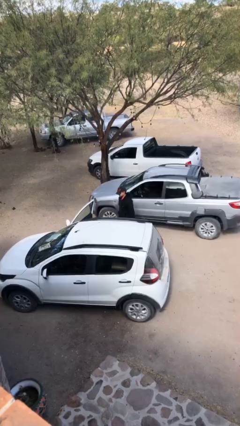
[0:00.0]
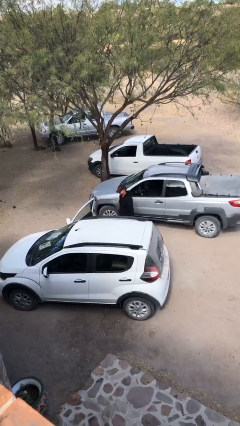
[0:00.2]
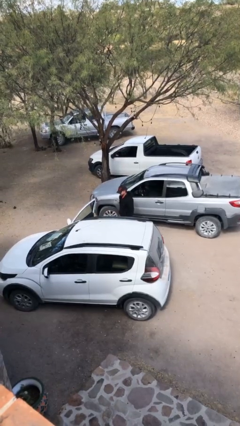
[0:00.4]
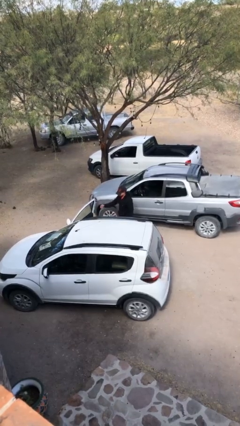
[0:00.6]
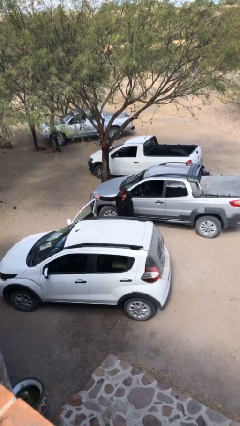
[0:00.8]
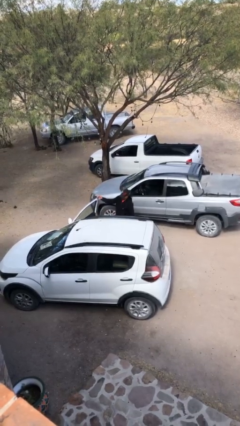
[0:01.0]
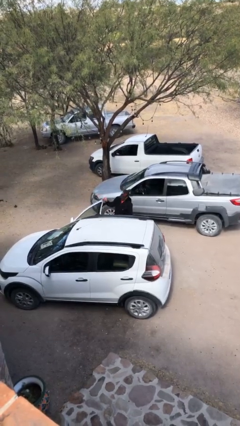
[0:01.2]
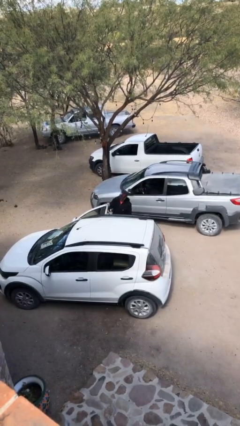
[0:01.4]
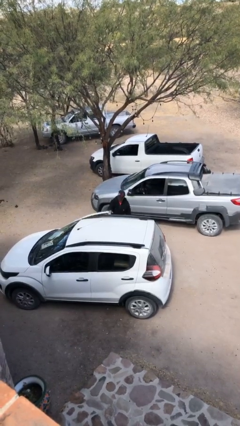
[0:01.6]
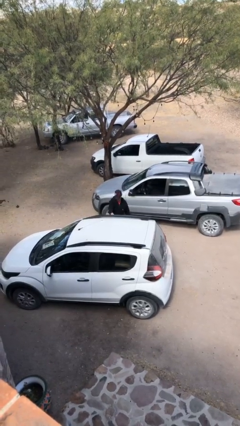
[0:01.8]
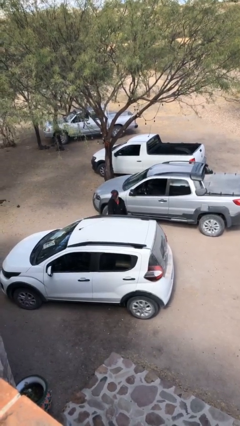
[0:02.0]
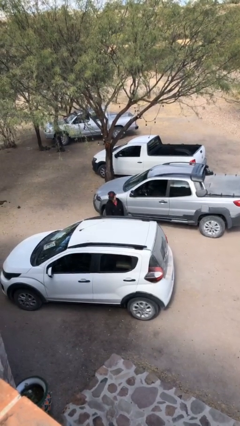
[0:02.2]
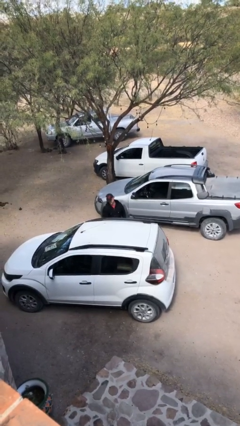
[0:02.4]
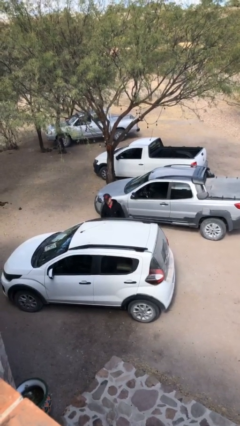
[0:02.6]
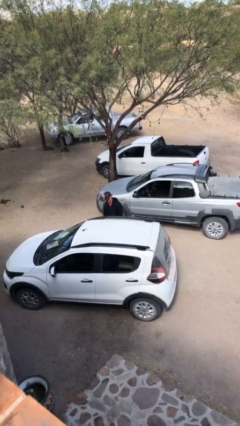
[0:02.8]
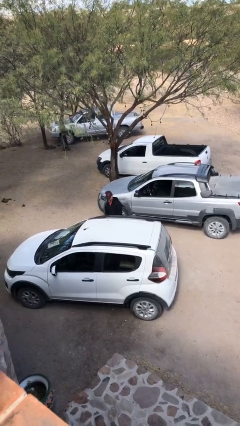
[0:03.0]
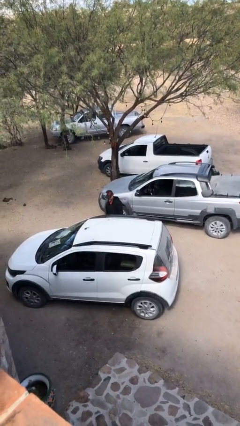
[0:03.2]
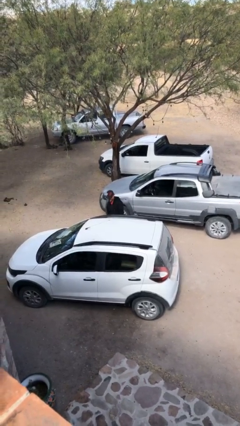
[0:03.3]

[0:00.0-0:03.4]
person closes car door

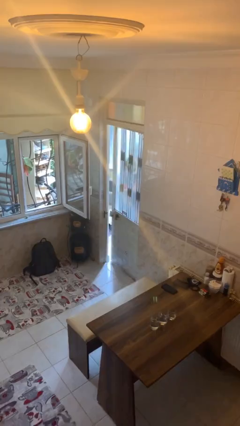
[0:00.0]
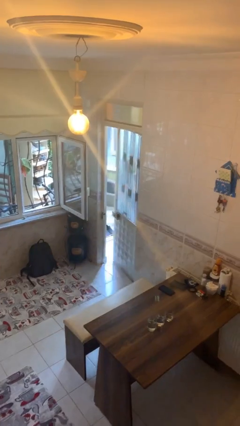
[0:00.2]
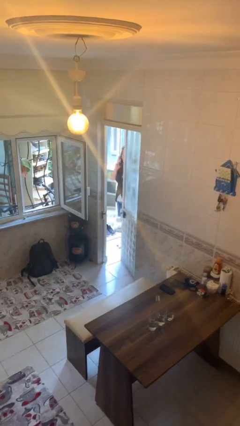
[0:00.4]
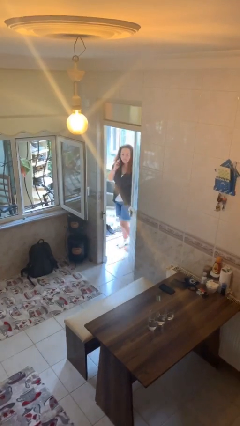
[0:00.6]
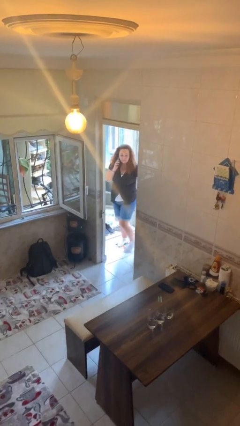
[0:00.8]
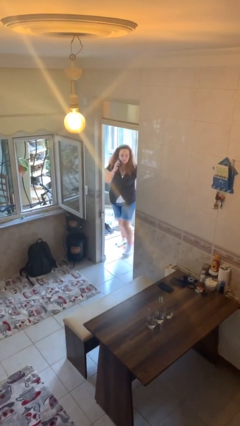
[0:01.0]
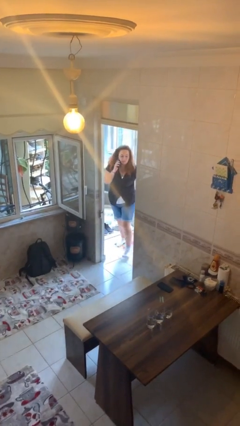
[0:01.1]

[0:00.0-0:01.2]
person opens facility door

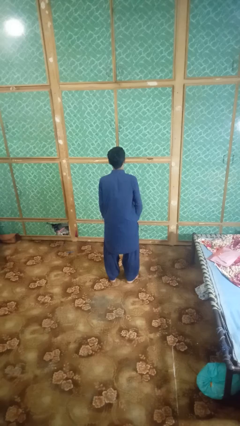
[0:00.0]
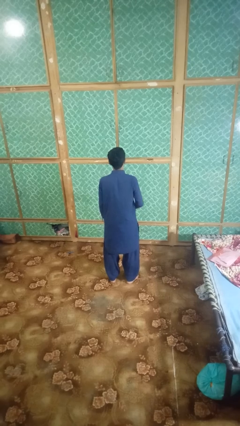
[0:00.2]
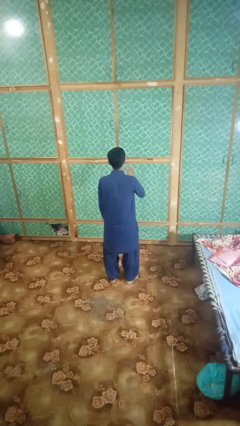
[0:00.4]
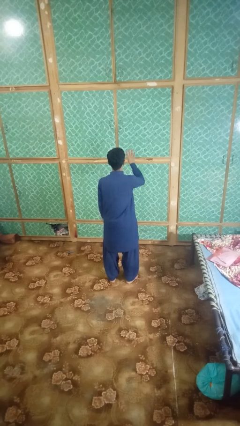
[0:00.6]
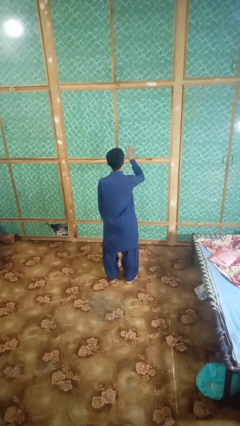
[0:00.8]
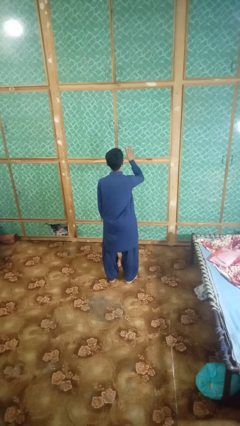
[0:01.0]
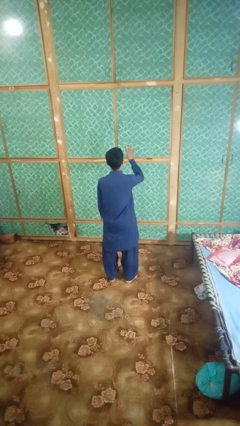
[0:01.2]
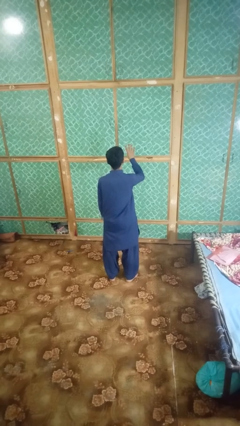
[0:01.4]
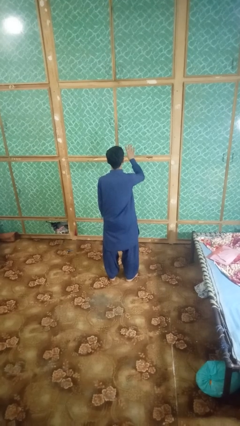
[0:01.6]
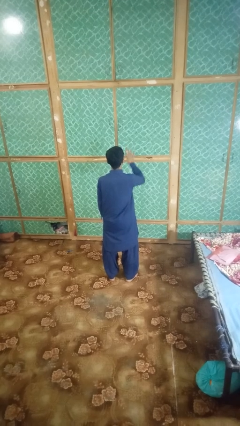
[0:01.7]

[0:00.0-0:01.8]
person gestures number four

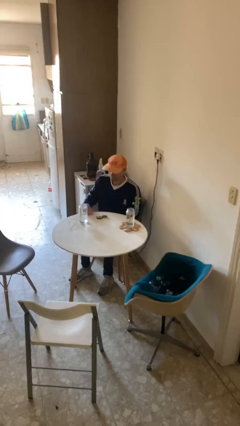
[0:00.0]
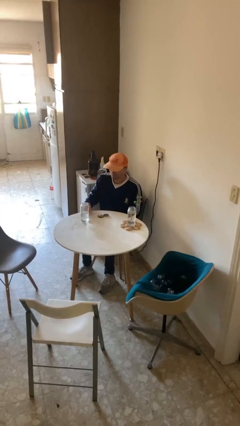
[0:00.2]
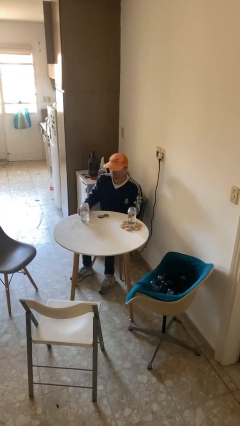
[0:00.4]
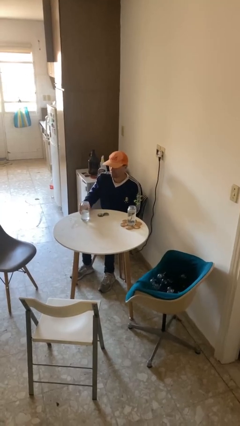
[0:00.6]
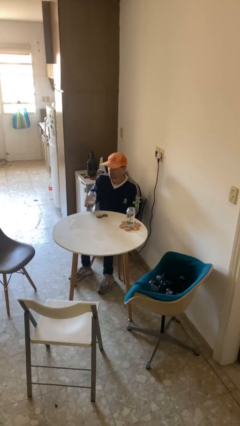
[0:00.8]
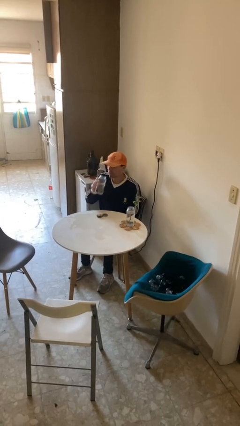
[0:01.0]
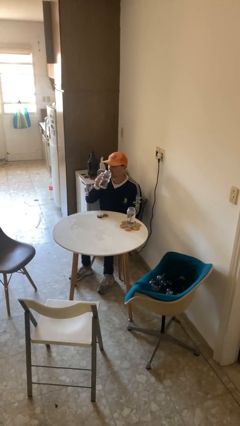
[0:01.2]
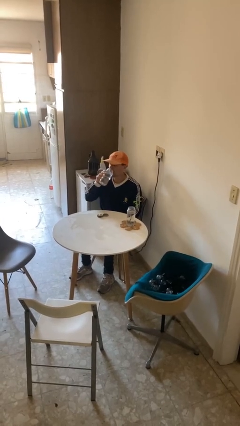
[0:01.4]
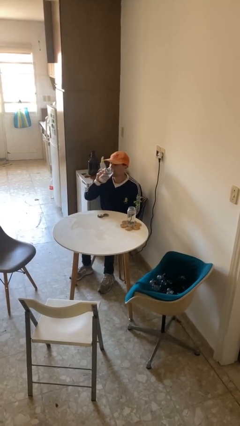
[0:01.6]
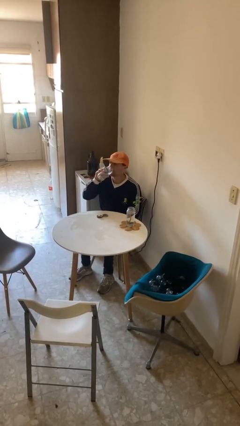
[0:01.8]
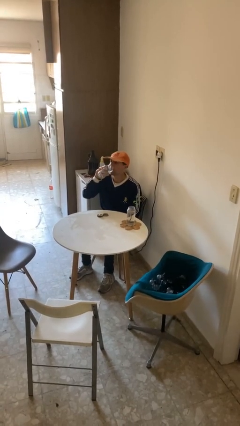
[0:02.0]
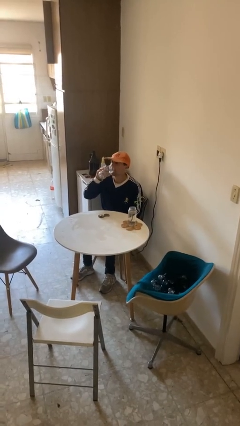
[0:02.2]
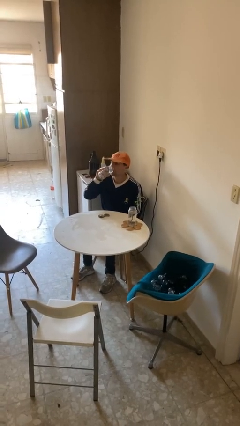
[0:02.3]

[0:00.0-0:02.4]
person drinks from cup

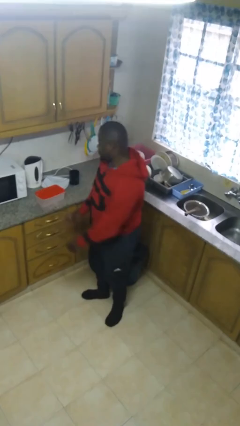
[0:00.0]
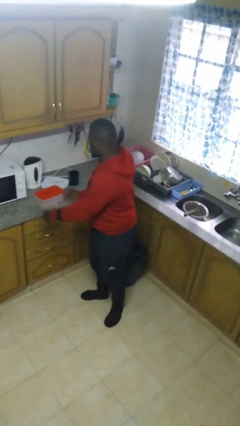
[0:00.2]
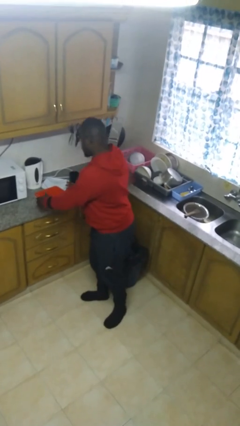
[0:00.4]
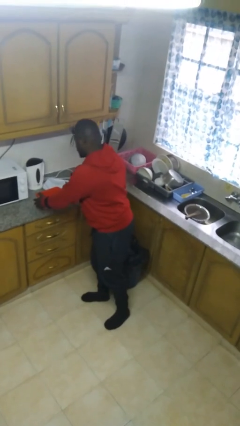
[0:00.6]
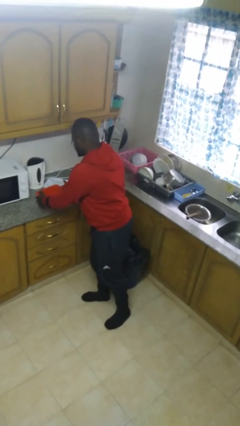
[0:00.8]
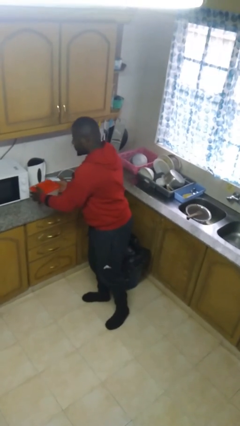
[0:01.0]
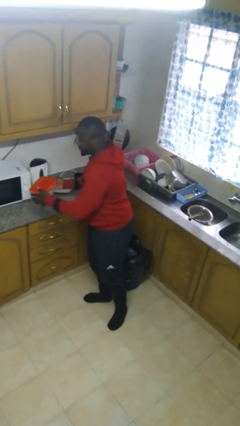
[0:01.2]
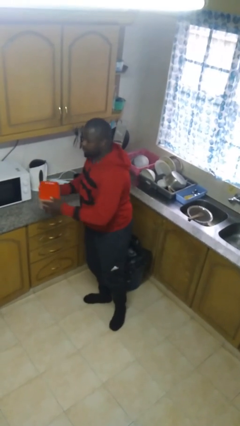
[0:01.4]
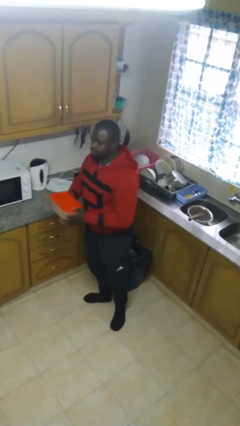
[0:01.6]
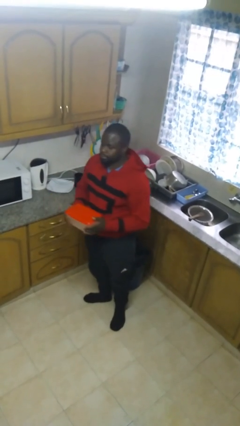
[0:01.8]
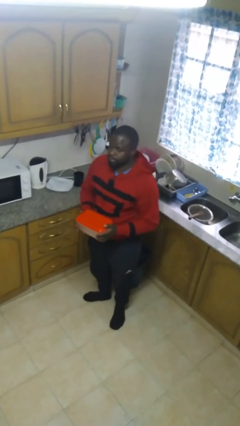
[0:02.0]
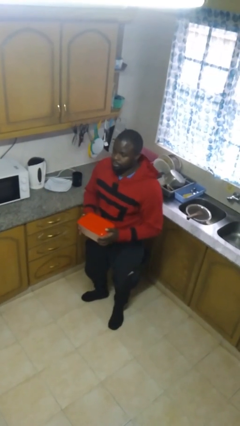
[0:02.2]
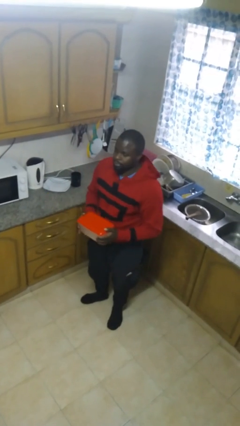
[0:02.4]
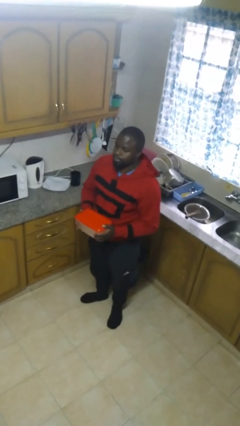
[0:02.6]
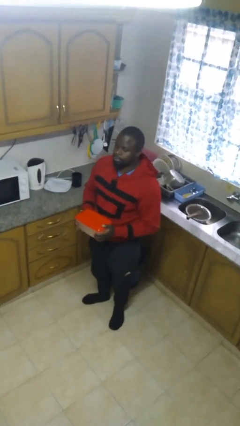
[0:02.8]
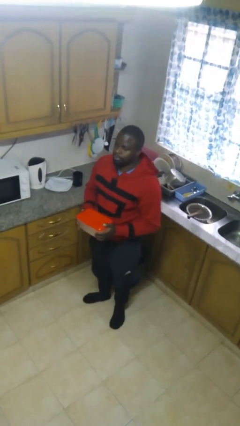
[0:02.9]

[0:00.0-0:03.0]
person picks up object from countertop

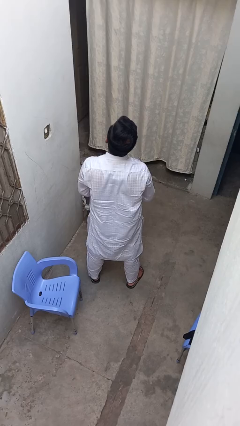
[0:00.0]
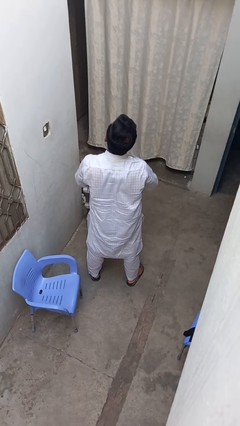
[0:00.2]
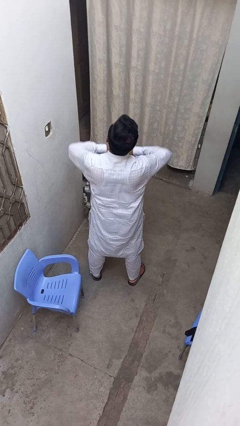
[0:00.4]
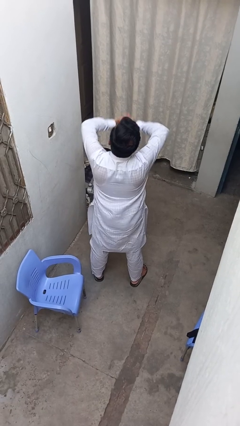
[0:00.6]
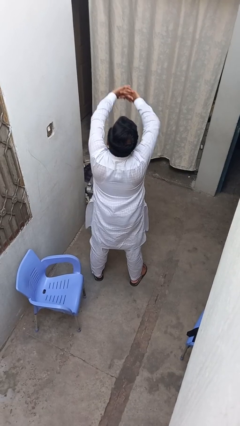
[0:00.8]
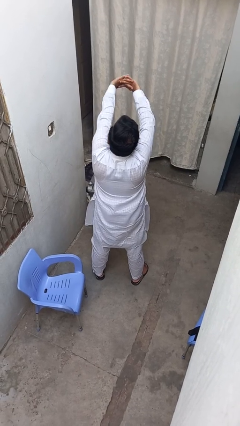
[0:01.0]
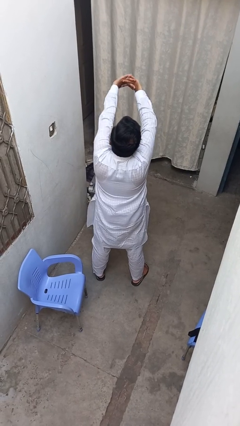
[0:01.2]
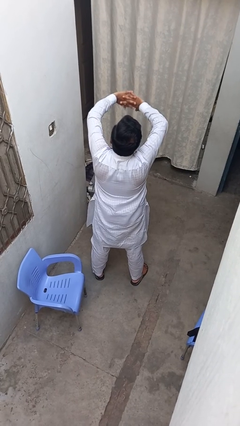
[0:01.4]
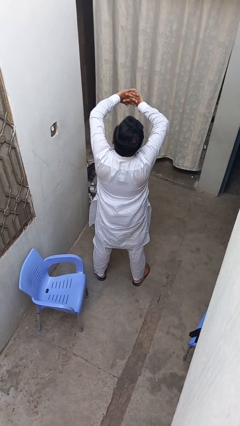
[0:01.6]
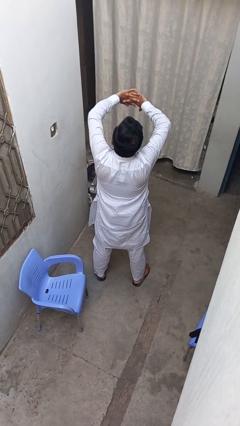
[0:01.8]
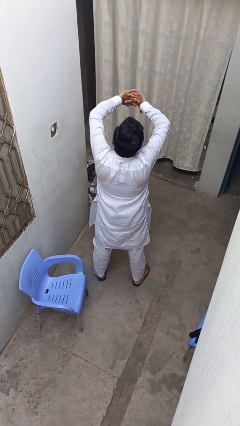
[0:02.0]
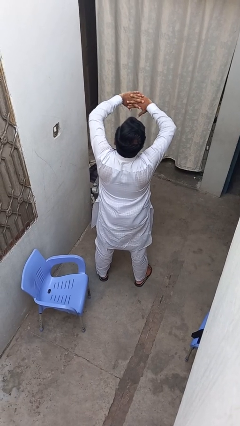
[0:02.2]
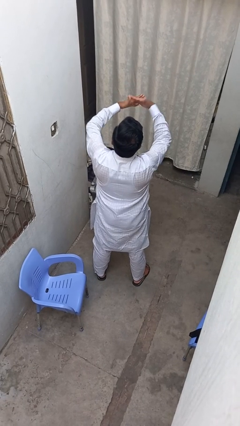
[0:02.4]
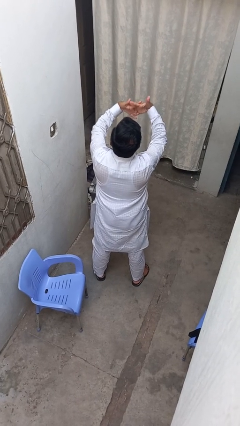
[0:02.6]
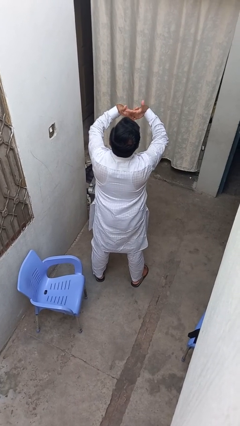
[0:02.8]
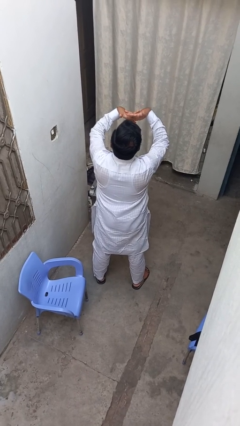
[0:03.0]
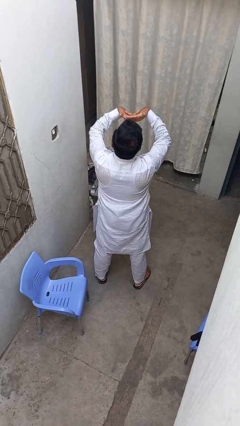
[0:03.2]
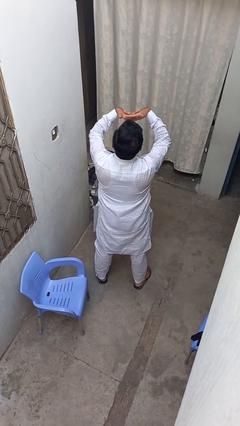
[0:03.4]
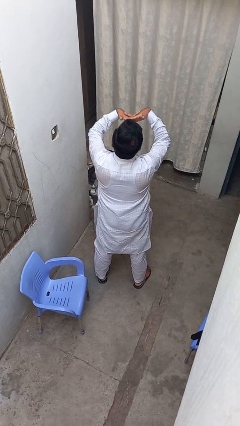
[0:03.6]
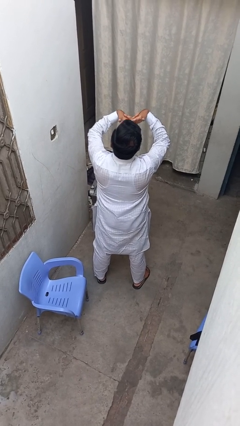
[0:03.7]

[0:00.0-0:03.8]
person snaps fingers

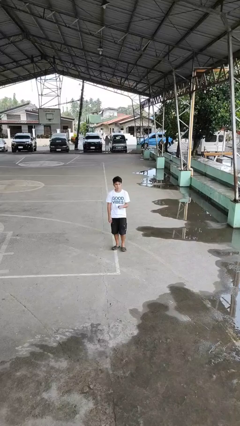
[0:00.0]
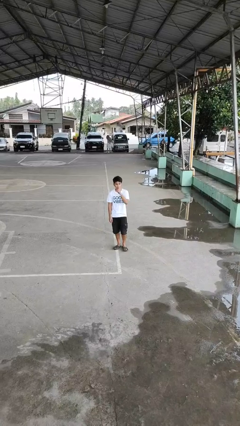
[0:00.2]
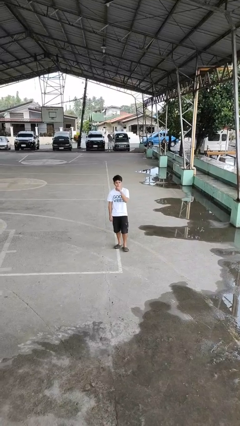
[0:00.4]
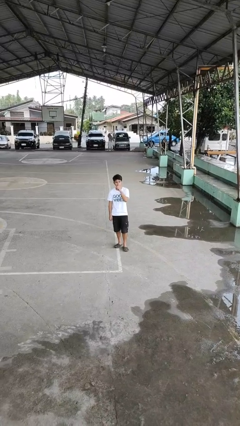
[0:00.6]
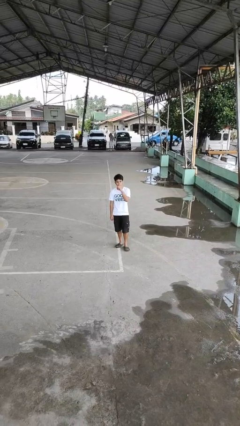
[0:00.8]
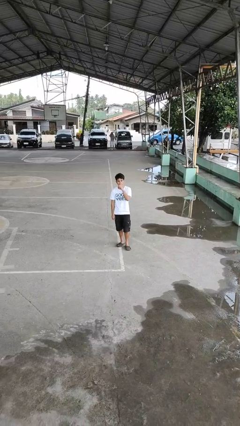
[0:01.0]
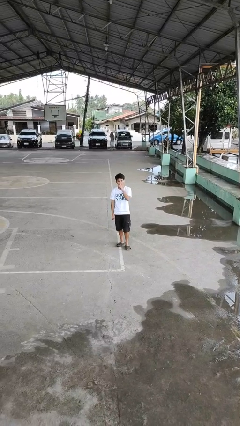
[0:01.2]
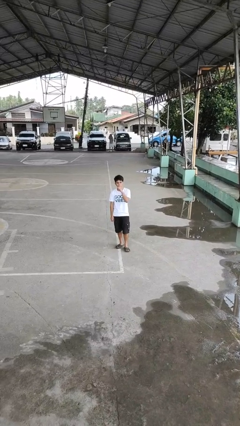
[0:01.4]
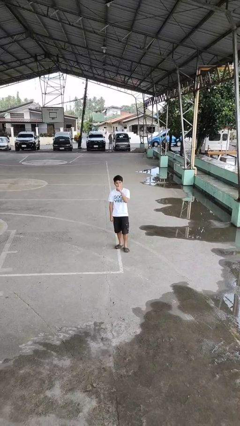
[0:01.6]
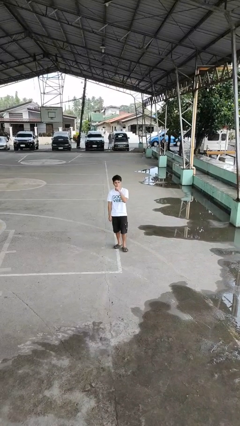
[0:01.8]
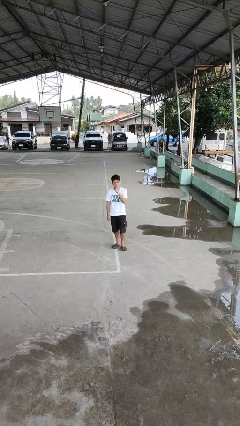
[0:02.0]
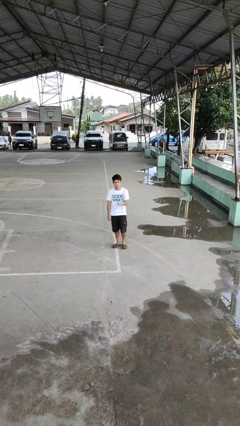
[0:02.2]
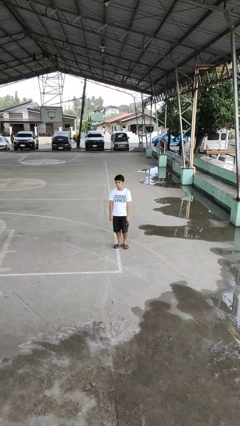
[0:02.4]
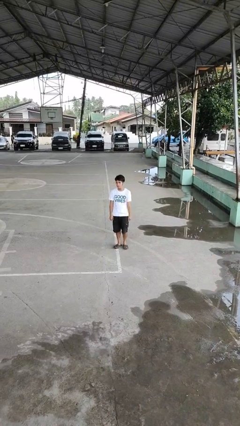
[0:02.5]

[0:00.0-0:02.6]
person gestures be quiet
